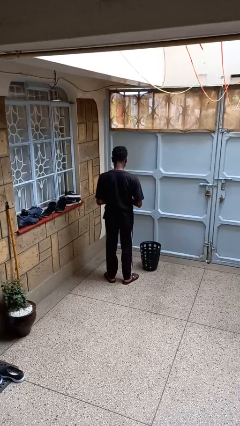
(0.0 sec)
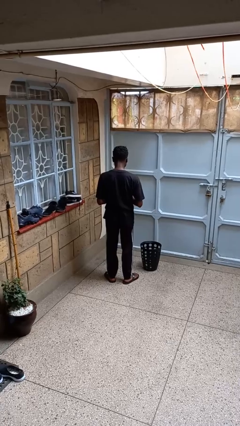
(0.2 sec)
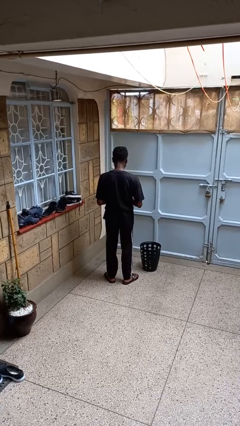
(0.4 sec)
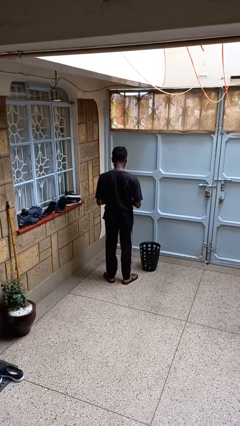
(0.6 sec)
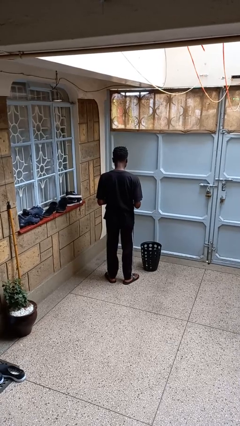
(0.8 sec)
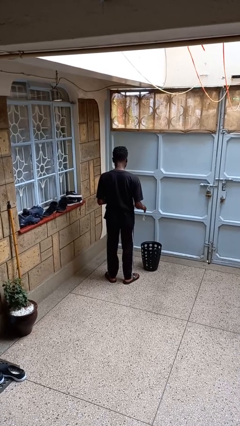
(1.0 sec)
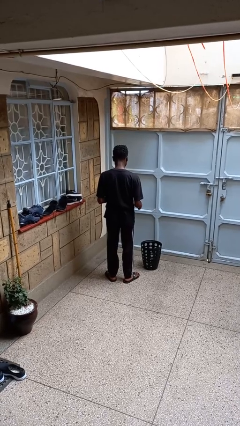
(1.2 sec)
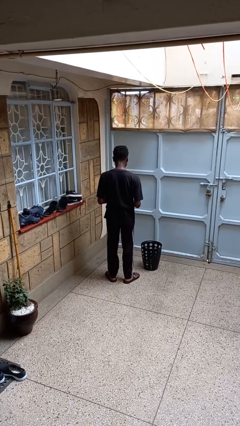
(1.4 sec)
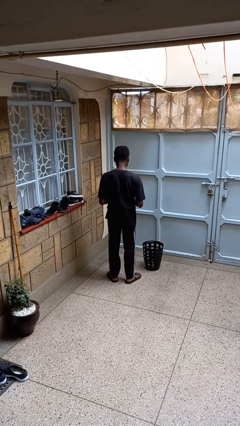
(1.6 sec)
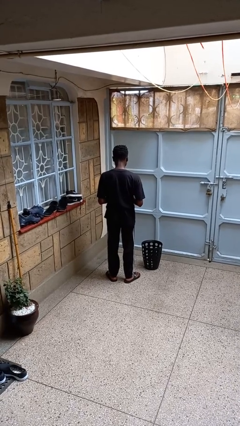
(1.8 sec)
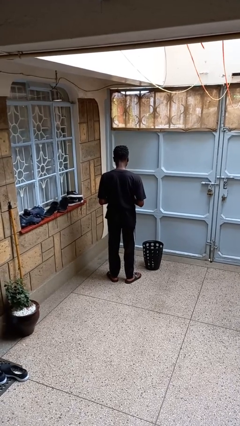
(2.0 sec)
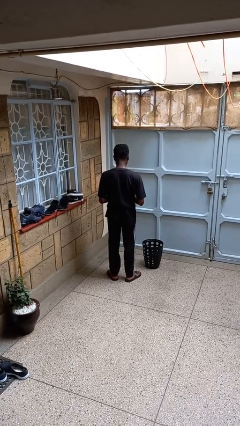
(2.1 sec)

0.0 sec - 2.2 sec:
person discards trash

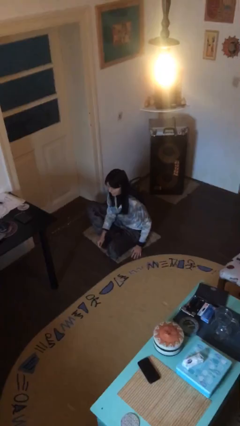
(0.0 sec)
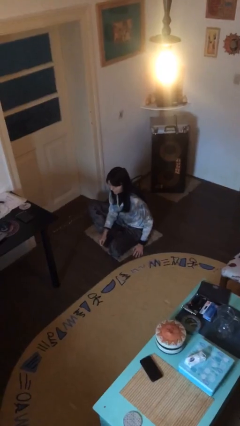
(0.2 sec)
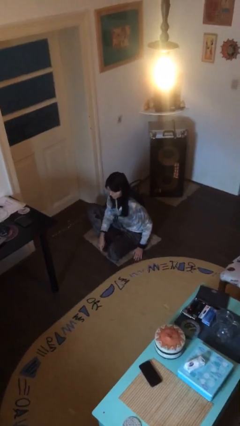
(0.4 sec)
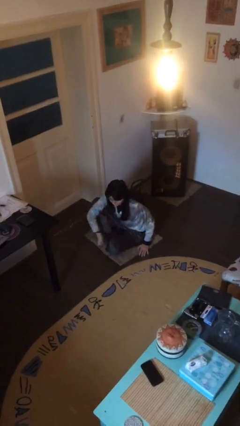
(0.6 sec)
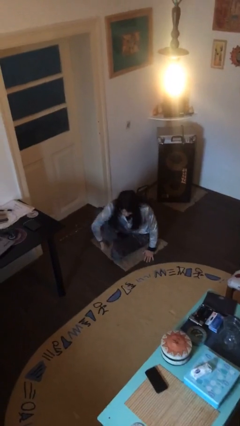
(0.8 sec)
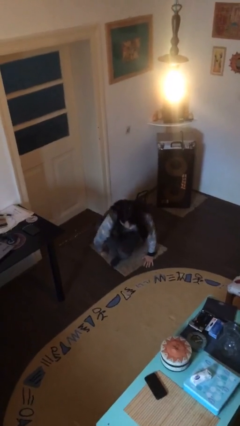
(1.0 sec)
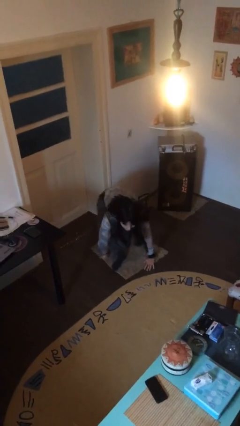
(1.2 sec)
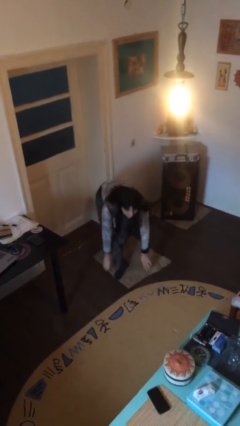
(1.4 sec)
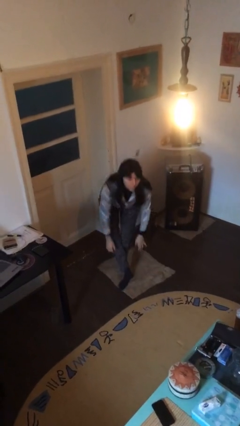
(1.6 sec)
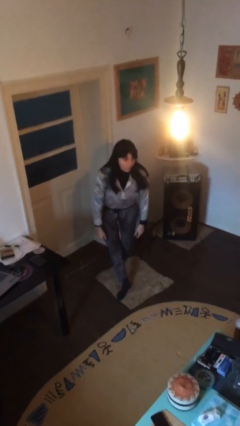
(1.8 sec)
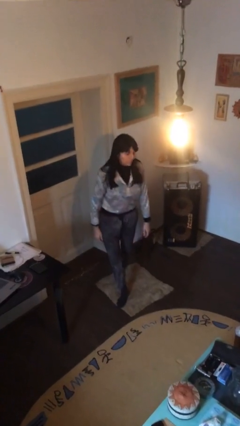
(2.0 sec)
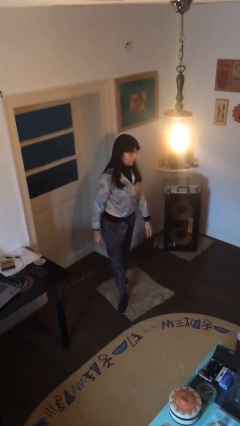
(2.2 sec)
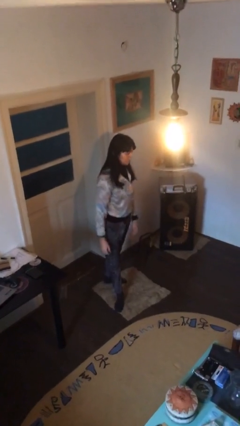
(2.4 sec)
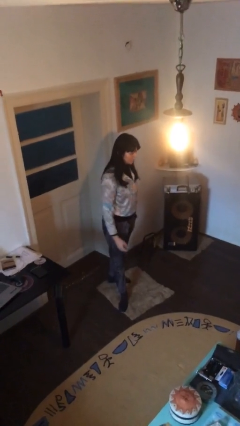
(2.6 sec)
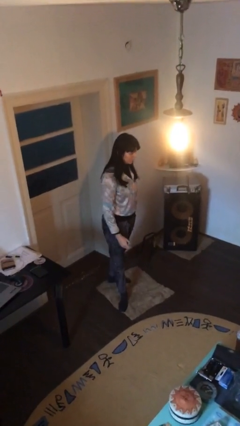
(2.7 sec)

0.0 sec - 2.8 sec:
person stands up

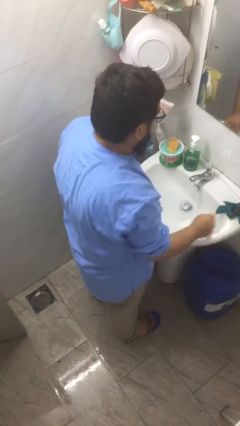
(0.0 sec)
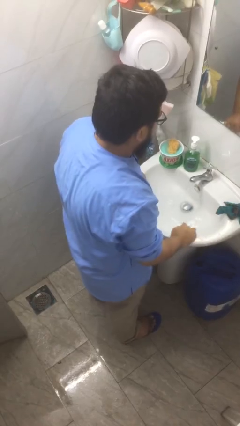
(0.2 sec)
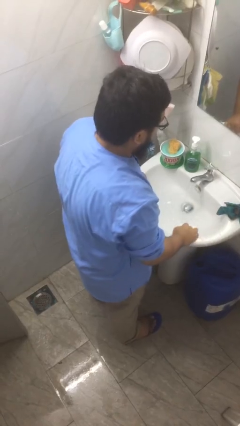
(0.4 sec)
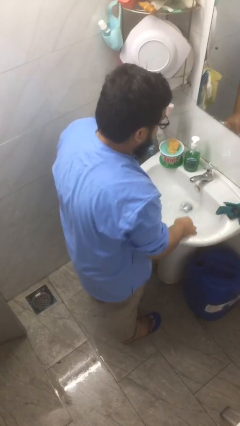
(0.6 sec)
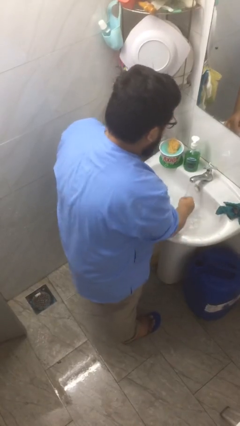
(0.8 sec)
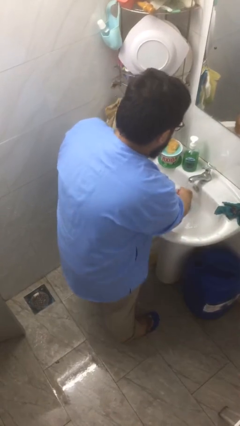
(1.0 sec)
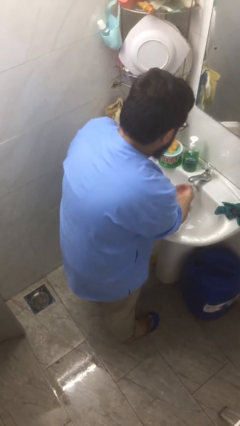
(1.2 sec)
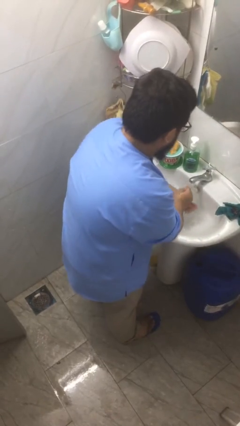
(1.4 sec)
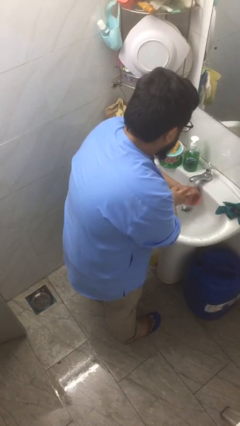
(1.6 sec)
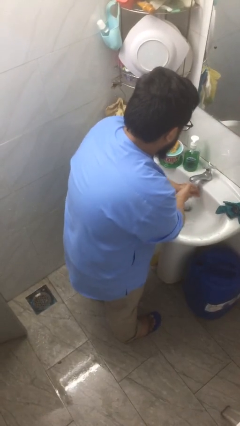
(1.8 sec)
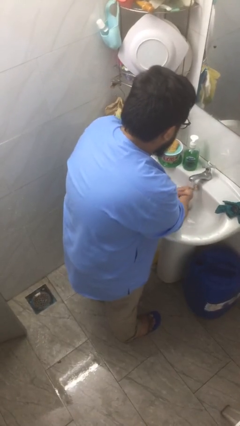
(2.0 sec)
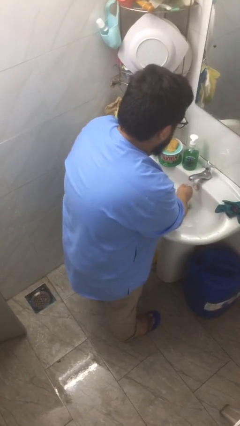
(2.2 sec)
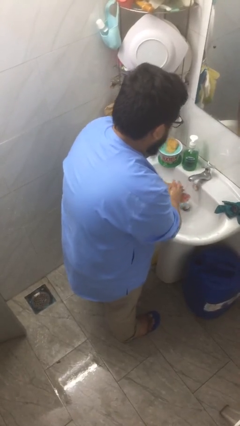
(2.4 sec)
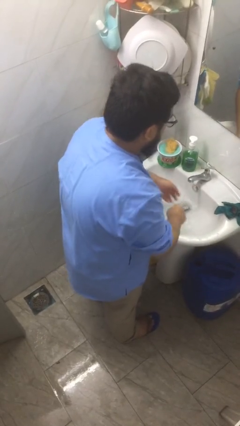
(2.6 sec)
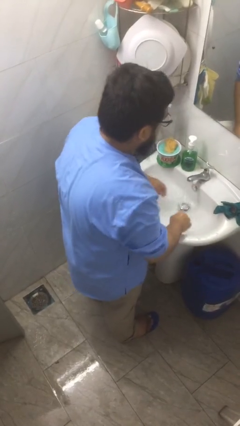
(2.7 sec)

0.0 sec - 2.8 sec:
person washes hands

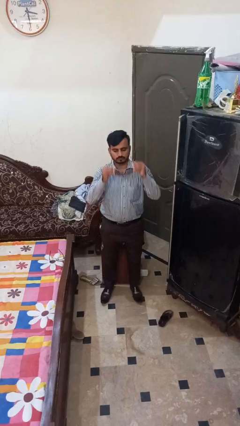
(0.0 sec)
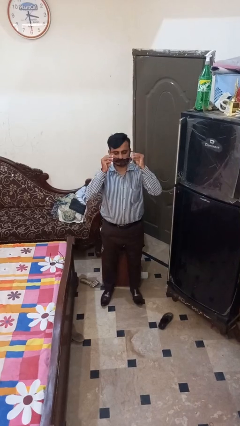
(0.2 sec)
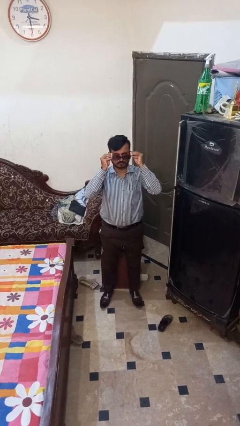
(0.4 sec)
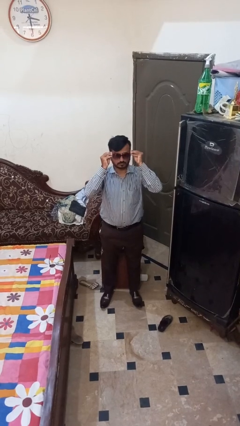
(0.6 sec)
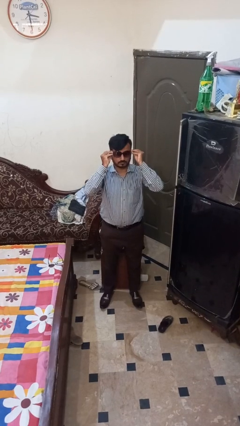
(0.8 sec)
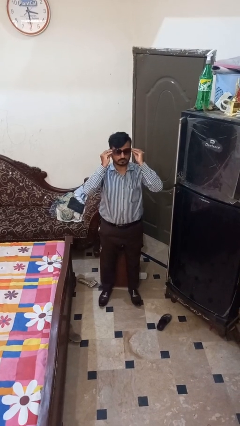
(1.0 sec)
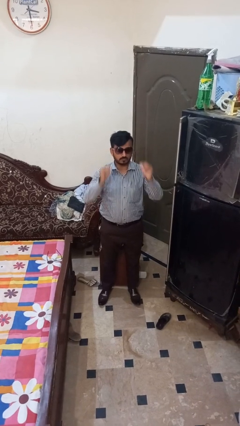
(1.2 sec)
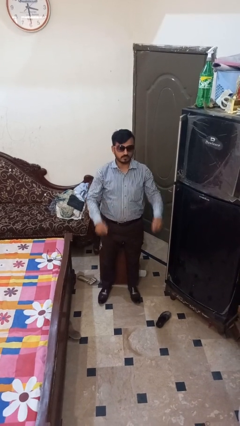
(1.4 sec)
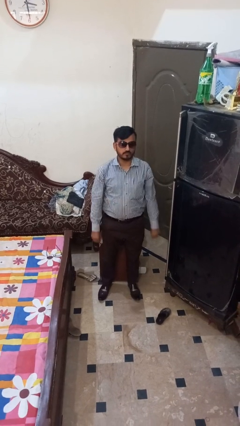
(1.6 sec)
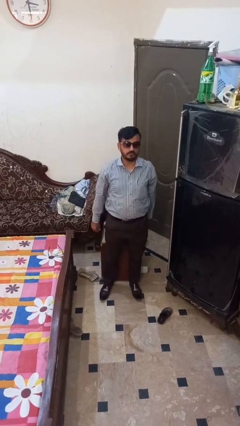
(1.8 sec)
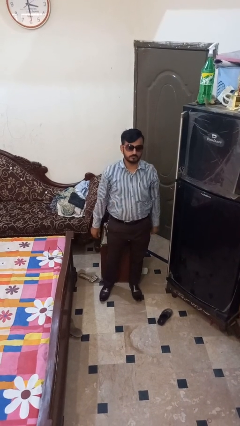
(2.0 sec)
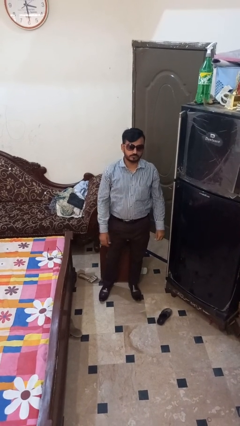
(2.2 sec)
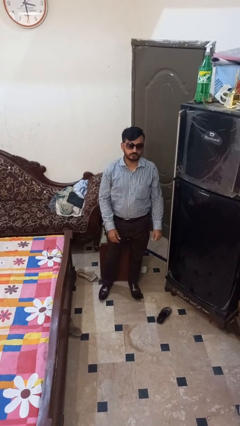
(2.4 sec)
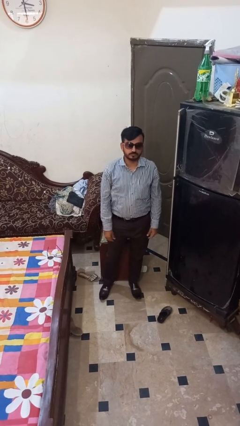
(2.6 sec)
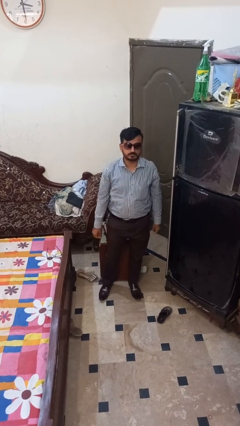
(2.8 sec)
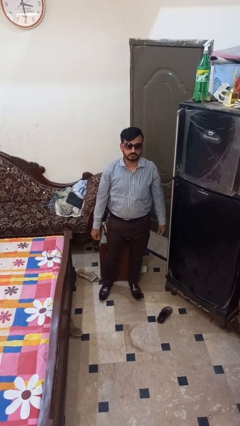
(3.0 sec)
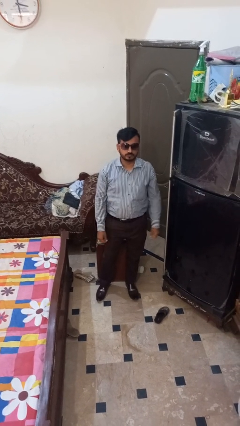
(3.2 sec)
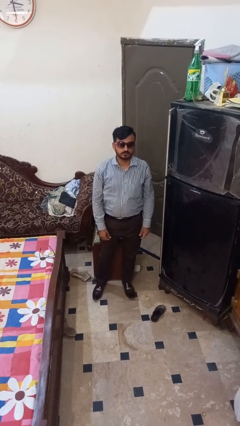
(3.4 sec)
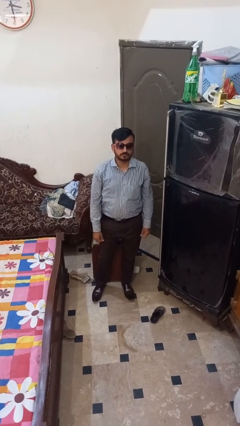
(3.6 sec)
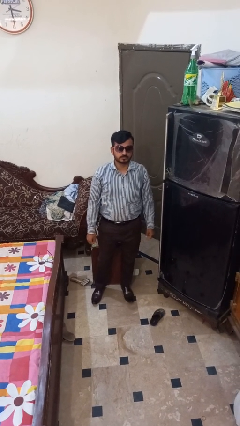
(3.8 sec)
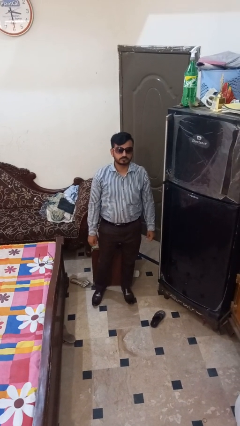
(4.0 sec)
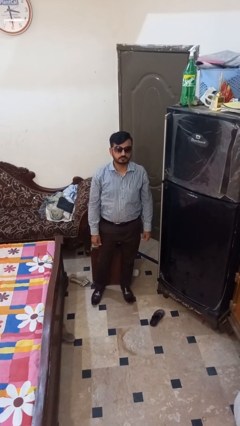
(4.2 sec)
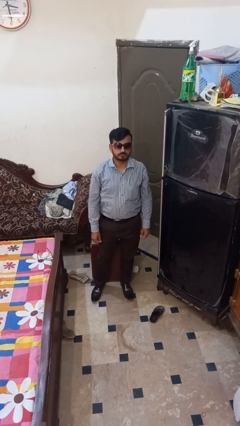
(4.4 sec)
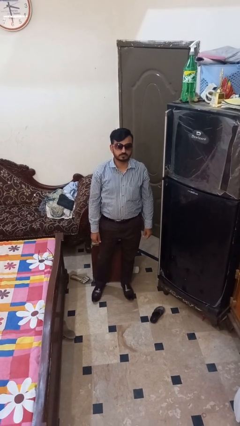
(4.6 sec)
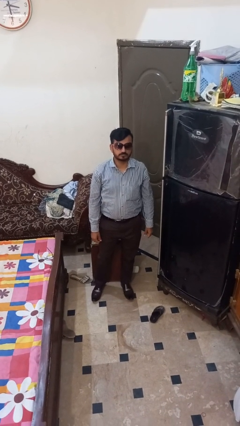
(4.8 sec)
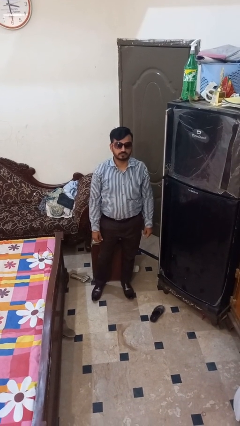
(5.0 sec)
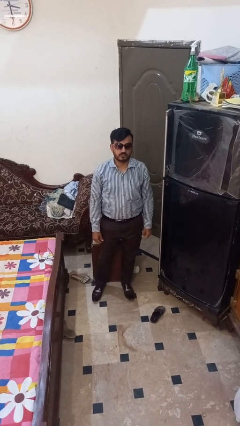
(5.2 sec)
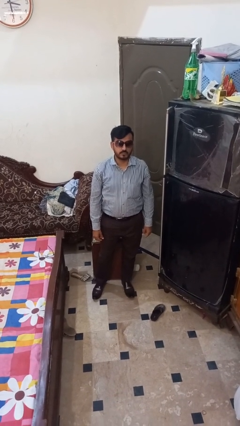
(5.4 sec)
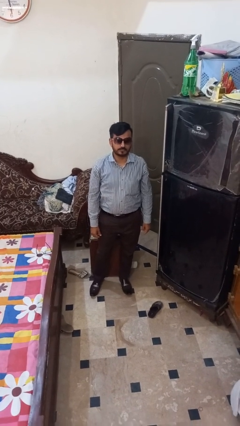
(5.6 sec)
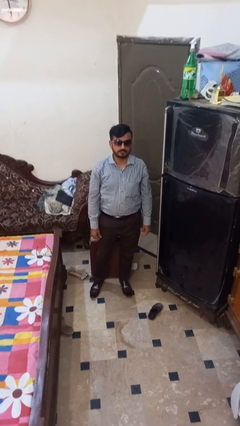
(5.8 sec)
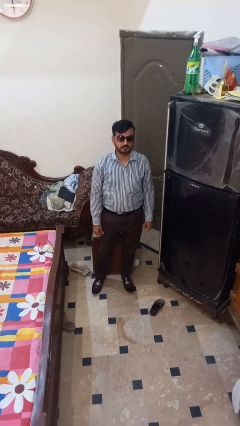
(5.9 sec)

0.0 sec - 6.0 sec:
person puts on sunglasses

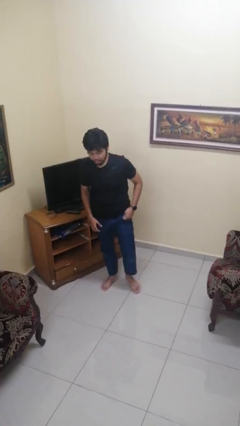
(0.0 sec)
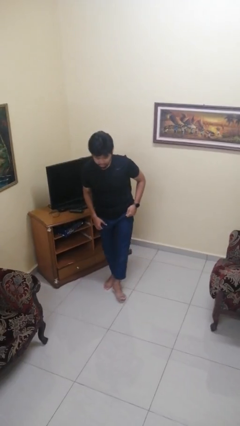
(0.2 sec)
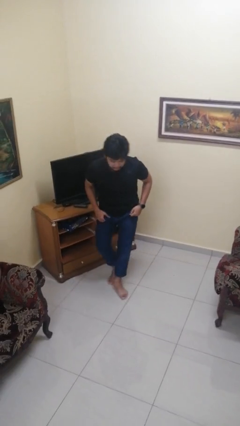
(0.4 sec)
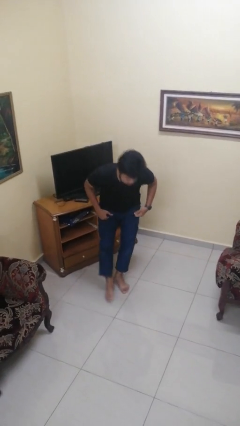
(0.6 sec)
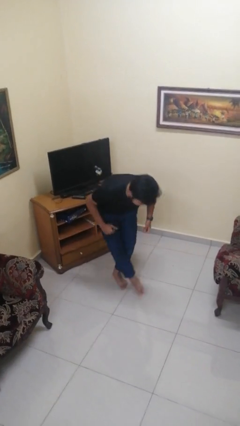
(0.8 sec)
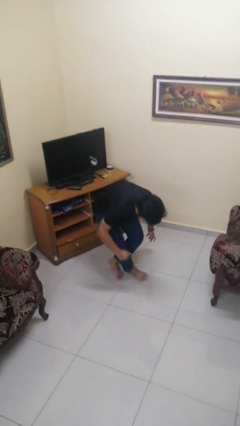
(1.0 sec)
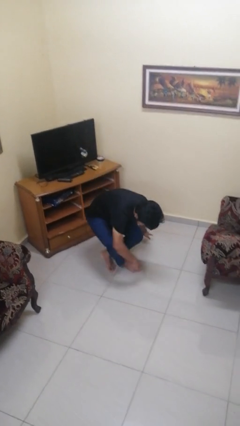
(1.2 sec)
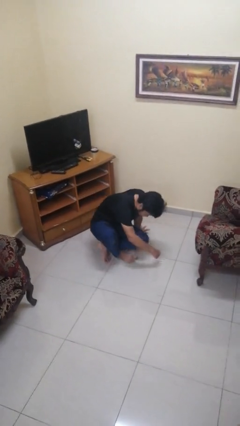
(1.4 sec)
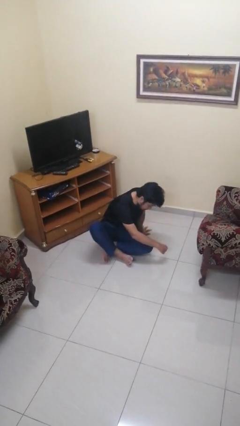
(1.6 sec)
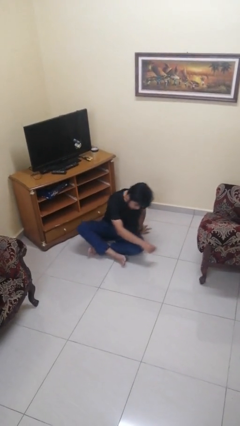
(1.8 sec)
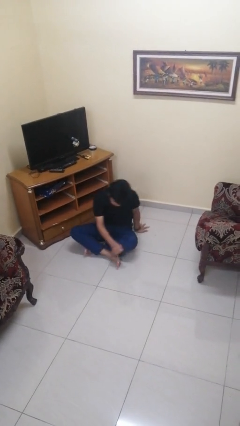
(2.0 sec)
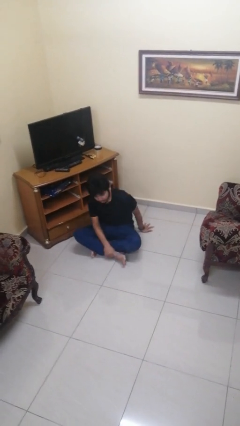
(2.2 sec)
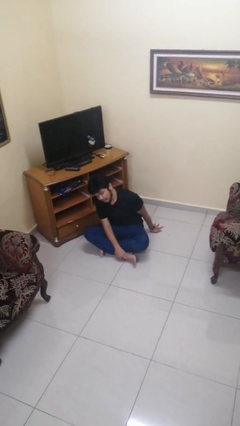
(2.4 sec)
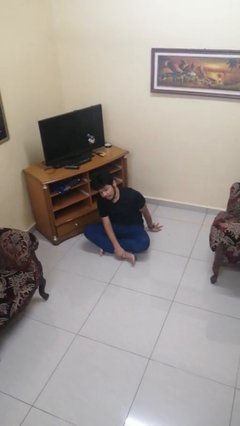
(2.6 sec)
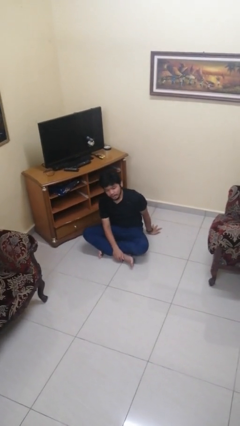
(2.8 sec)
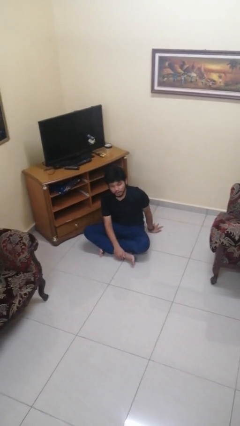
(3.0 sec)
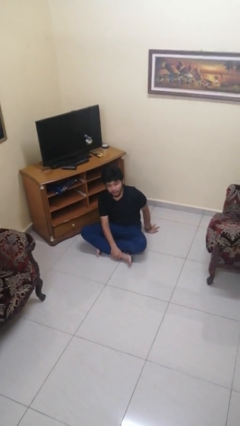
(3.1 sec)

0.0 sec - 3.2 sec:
person sits crisscross

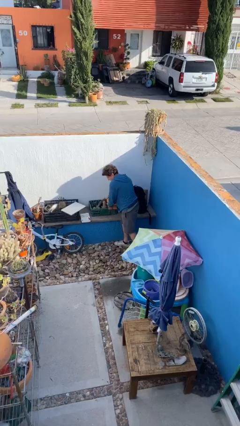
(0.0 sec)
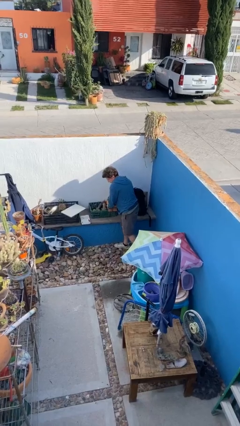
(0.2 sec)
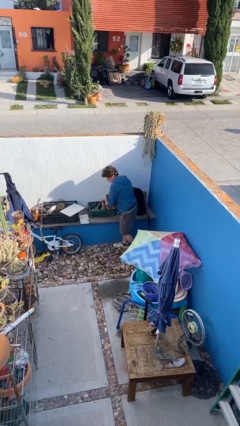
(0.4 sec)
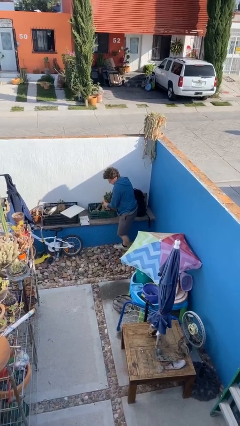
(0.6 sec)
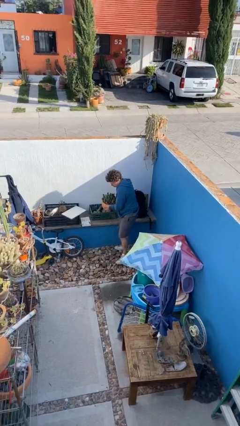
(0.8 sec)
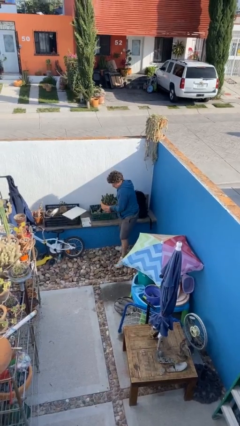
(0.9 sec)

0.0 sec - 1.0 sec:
person picks up object from table
